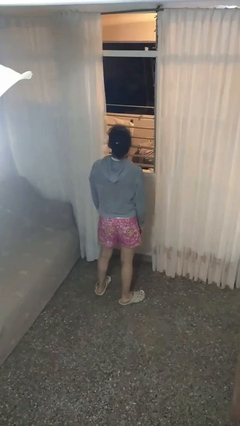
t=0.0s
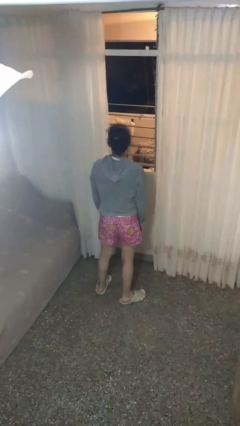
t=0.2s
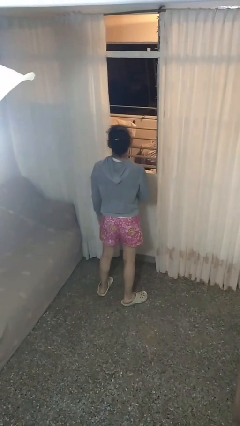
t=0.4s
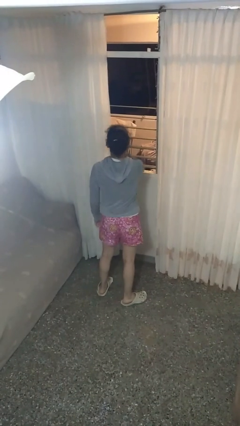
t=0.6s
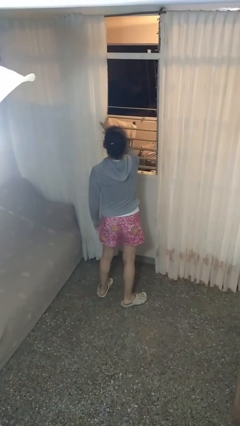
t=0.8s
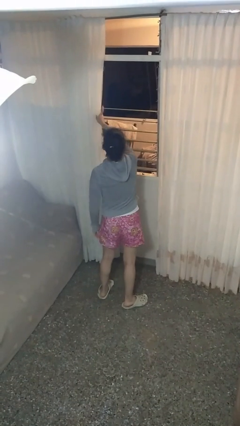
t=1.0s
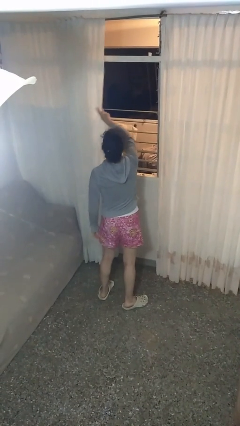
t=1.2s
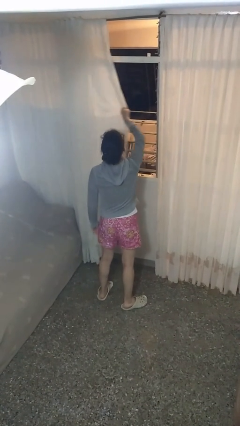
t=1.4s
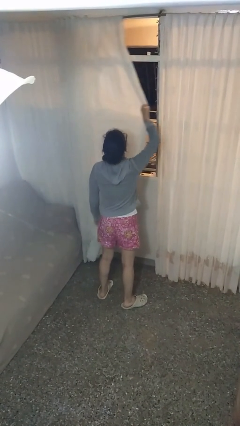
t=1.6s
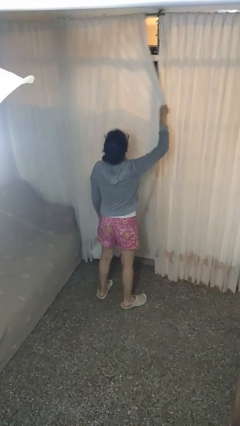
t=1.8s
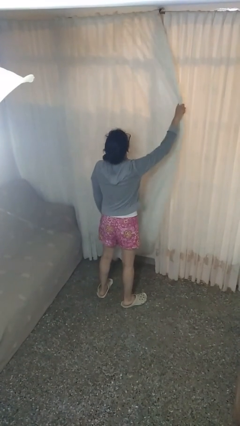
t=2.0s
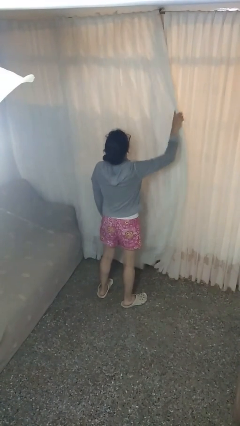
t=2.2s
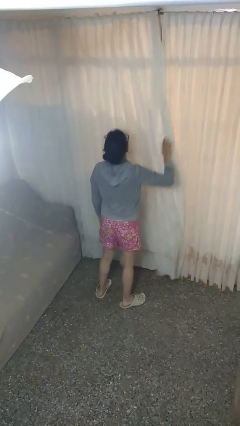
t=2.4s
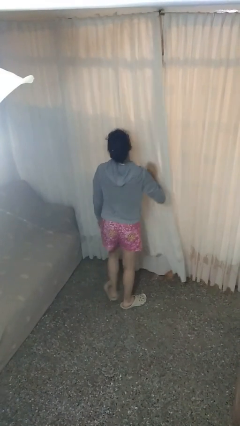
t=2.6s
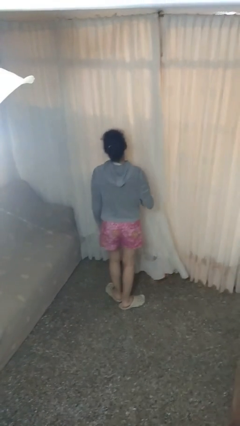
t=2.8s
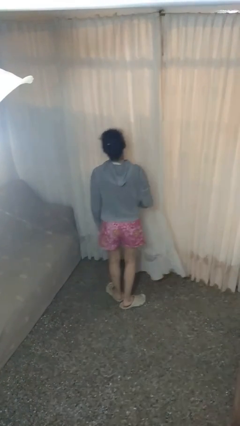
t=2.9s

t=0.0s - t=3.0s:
person closes curtains

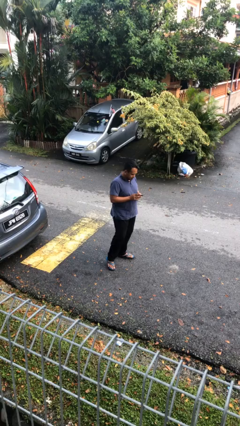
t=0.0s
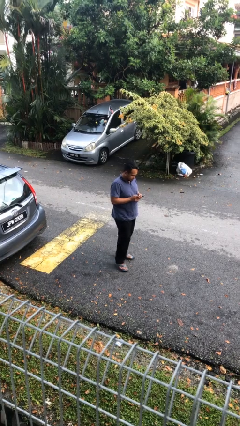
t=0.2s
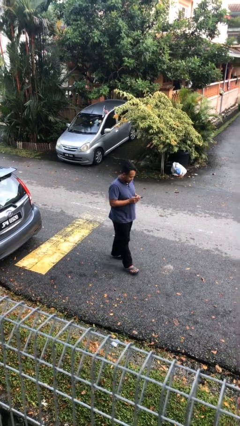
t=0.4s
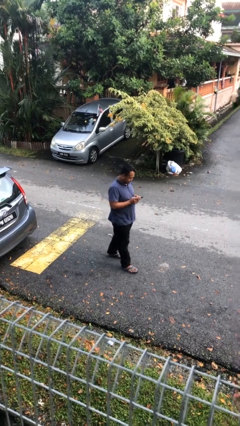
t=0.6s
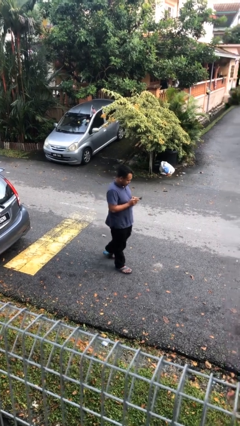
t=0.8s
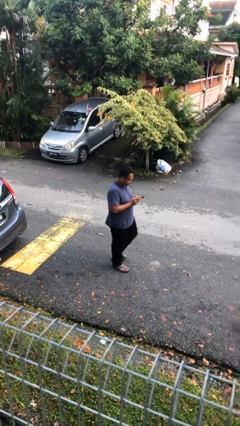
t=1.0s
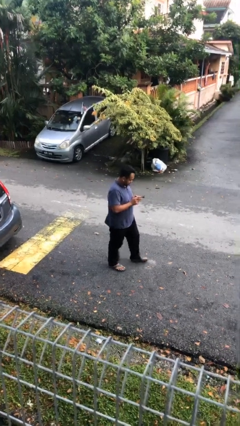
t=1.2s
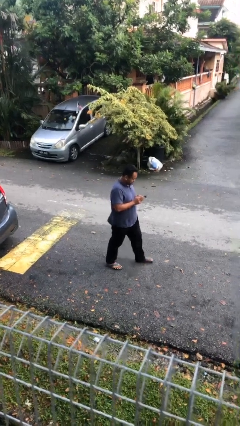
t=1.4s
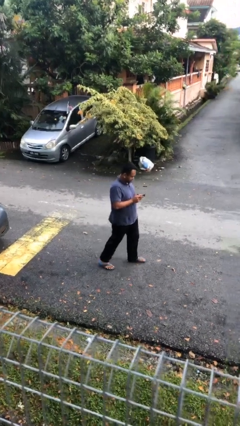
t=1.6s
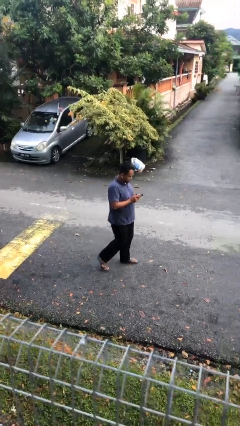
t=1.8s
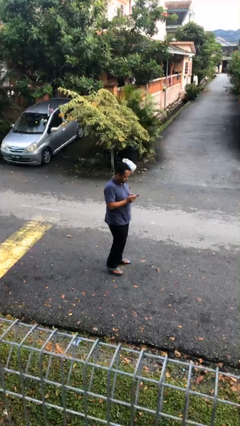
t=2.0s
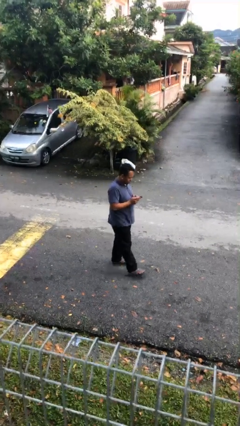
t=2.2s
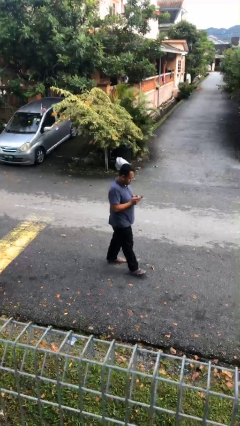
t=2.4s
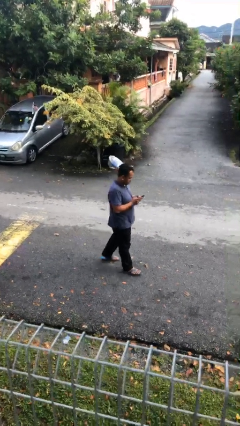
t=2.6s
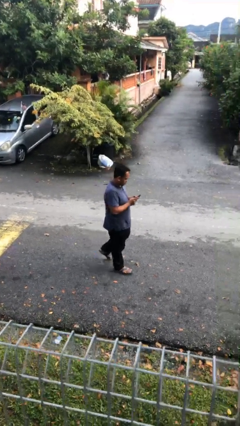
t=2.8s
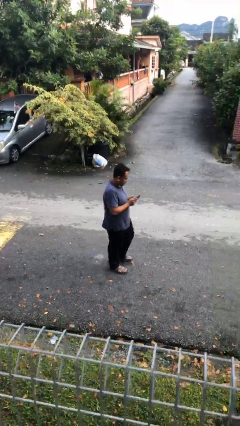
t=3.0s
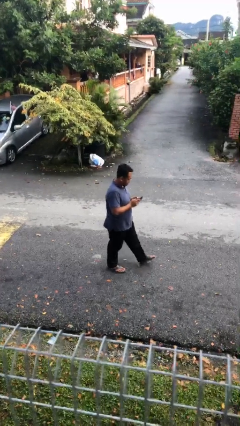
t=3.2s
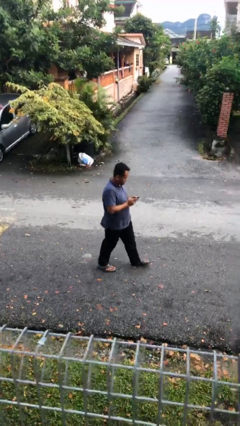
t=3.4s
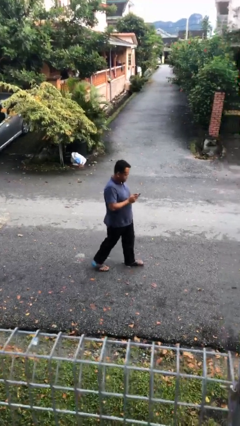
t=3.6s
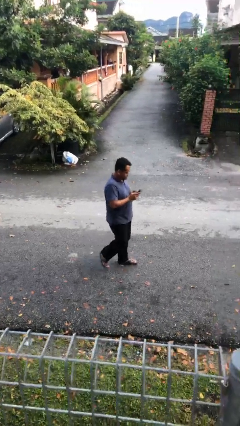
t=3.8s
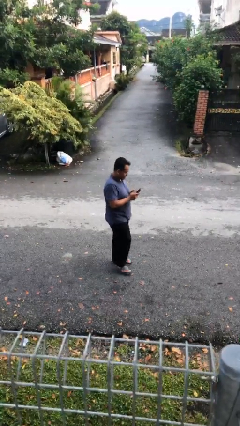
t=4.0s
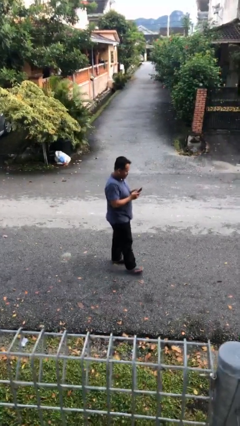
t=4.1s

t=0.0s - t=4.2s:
person texts on phone

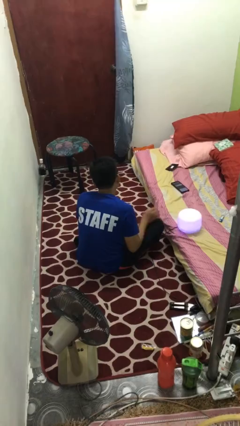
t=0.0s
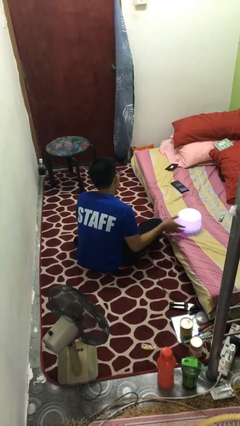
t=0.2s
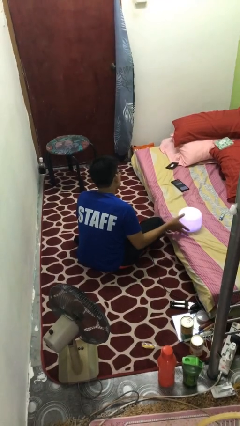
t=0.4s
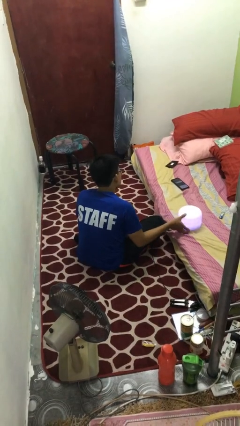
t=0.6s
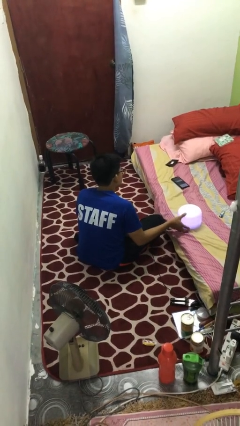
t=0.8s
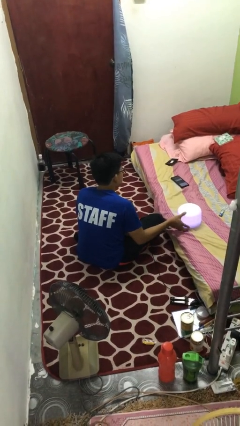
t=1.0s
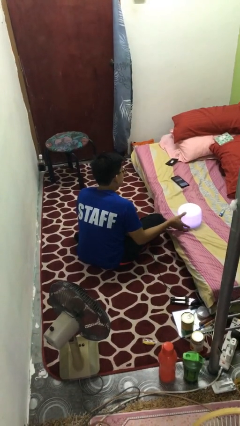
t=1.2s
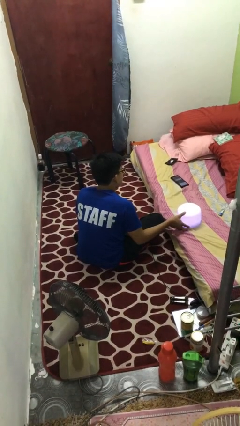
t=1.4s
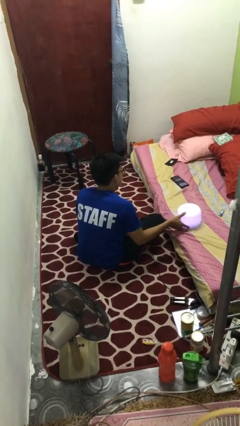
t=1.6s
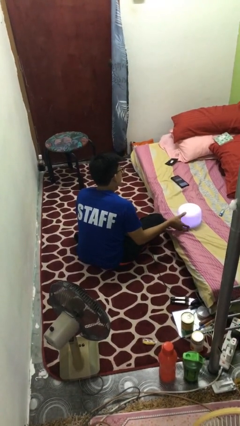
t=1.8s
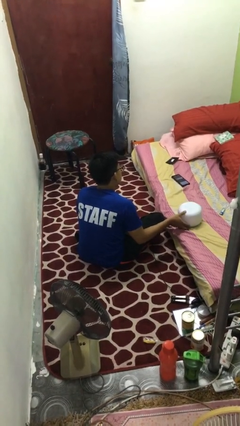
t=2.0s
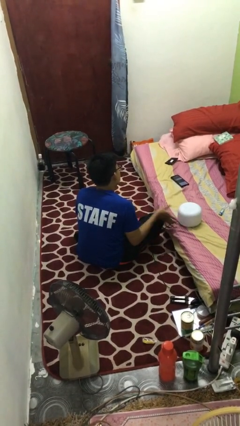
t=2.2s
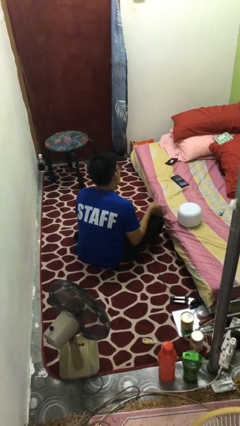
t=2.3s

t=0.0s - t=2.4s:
person turns off lamp

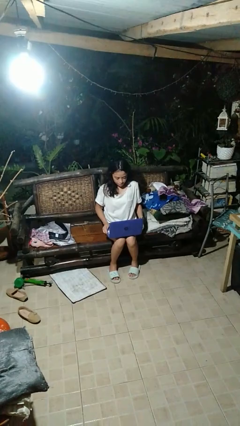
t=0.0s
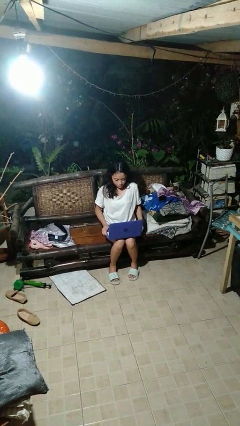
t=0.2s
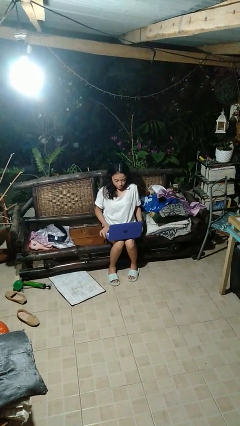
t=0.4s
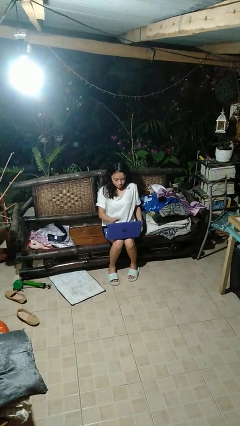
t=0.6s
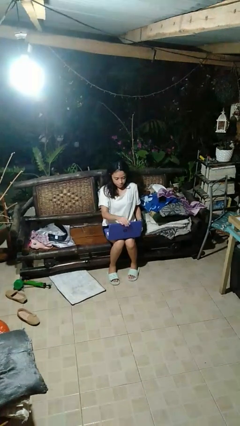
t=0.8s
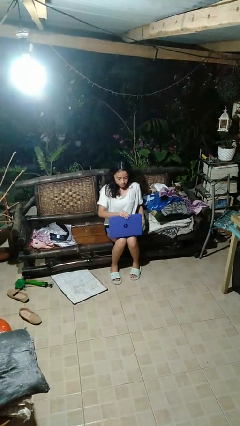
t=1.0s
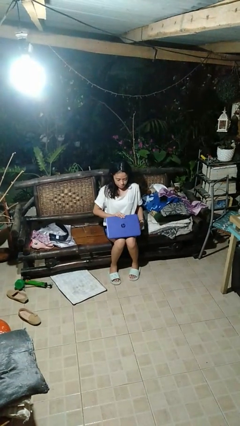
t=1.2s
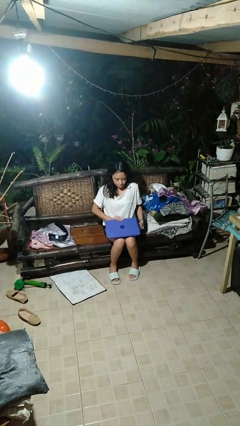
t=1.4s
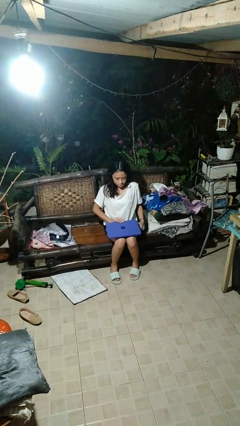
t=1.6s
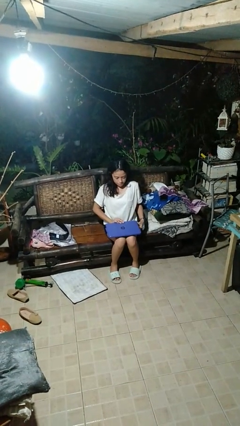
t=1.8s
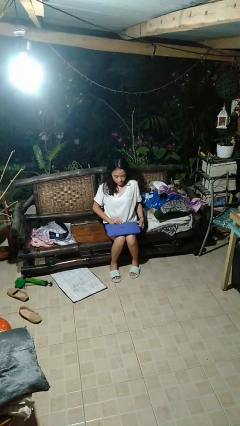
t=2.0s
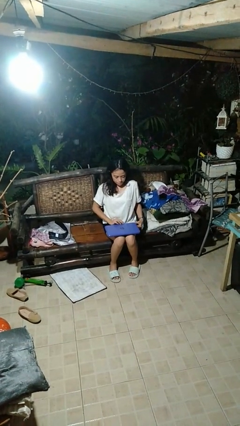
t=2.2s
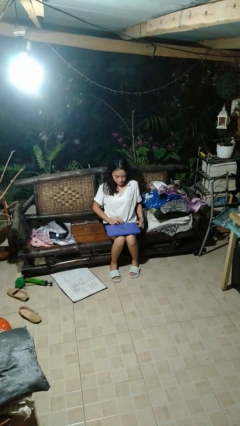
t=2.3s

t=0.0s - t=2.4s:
person closes laptop

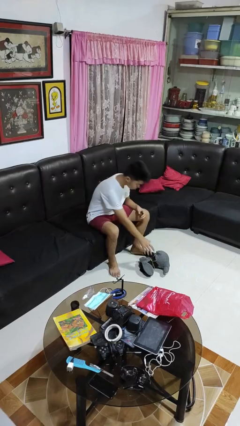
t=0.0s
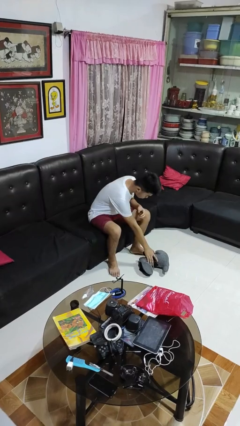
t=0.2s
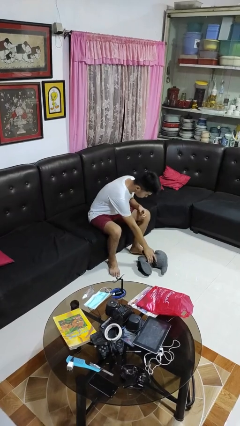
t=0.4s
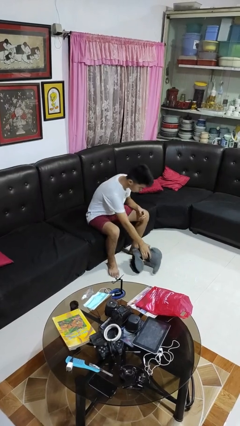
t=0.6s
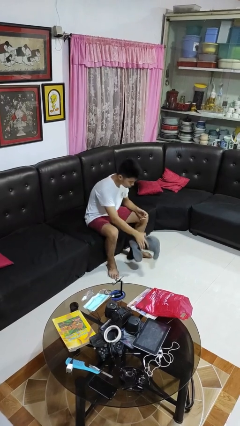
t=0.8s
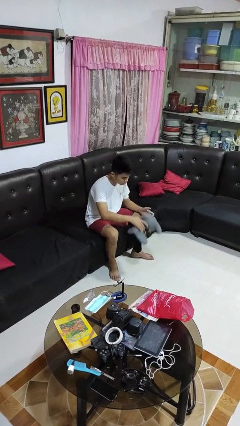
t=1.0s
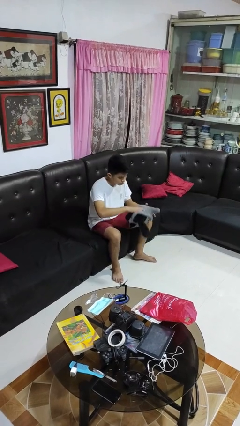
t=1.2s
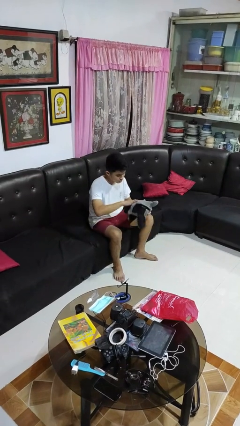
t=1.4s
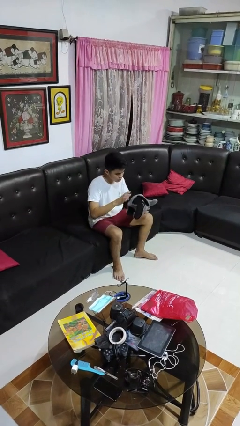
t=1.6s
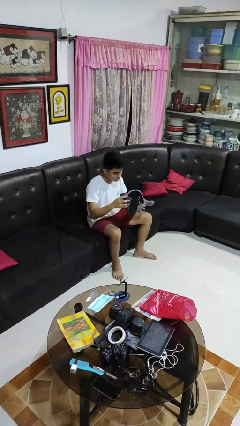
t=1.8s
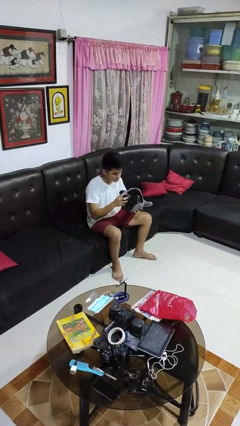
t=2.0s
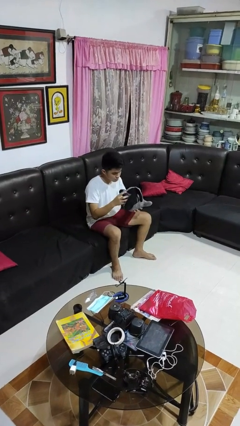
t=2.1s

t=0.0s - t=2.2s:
person picks up object from floor

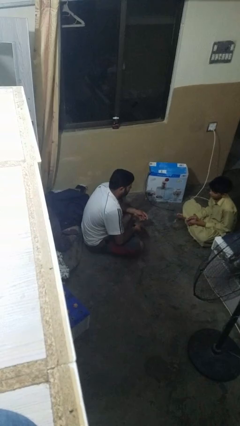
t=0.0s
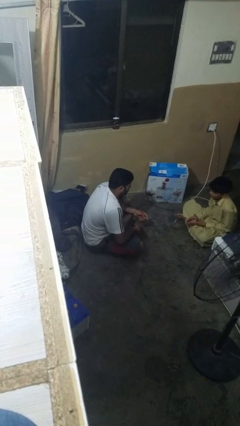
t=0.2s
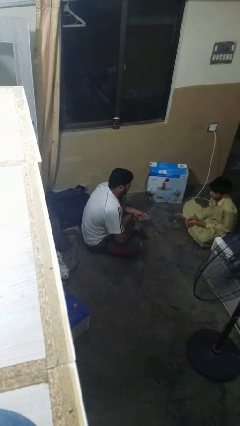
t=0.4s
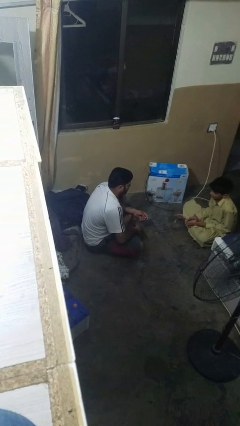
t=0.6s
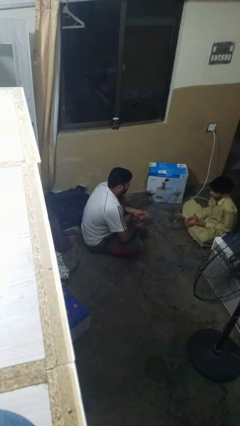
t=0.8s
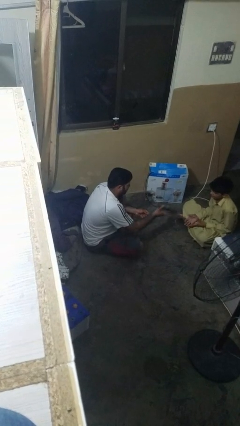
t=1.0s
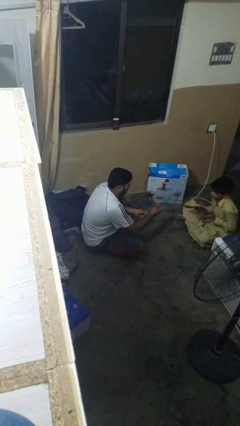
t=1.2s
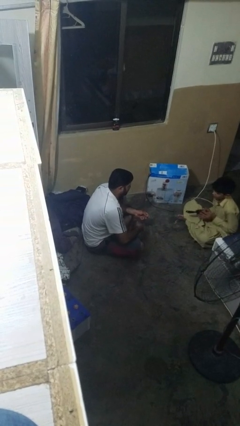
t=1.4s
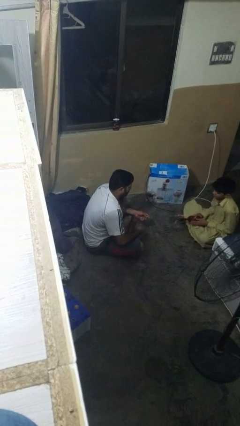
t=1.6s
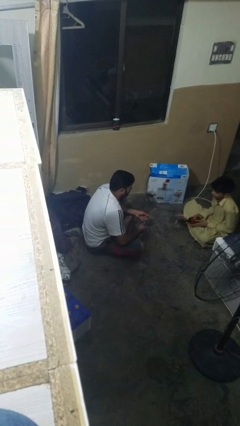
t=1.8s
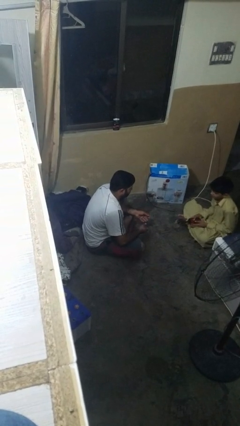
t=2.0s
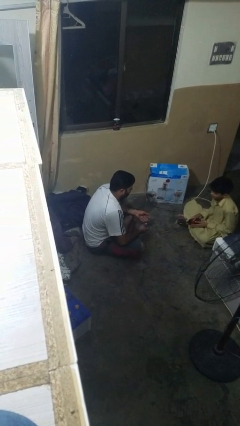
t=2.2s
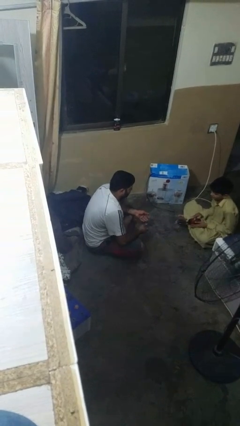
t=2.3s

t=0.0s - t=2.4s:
person throws object to person
